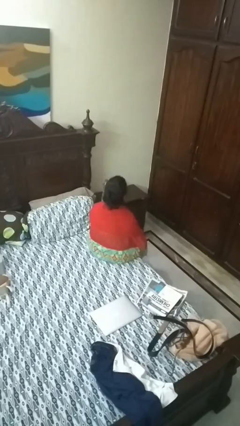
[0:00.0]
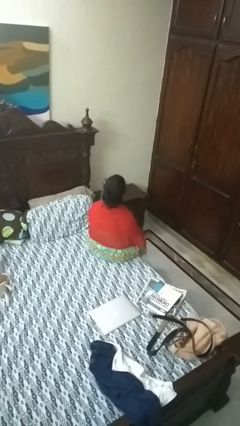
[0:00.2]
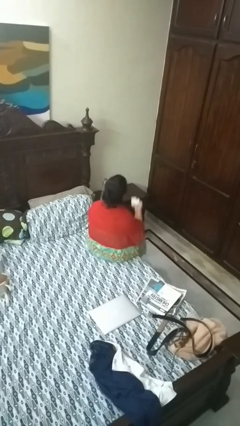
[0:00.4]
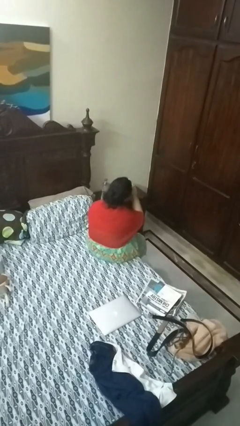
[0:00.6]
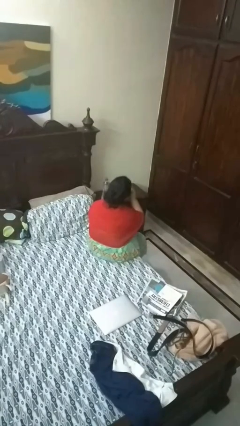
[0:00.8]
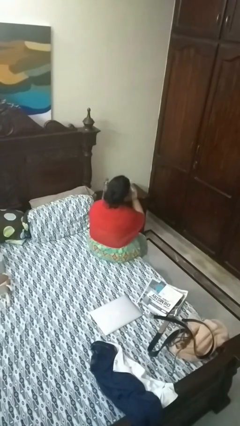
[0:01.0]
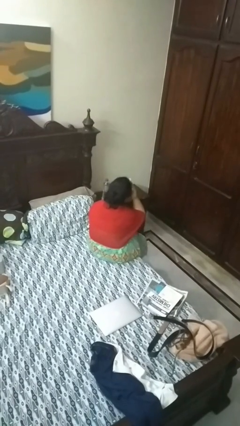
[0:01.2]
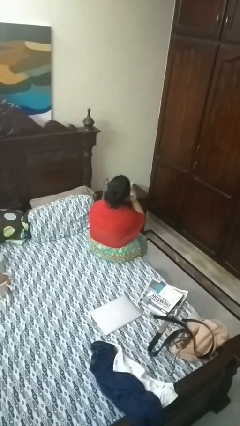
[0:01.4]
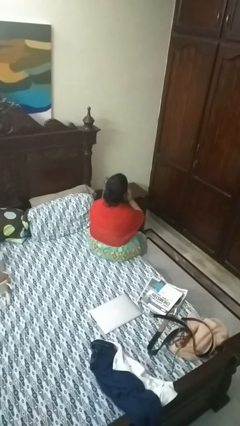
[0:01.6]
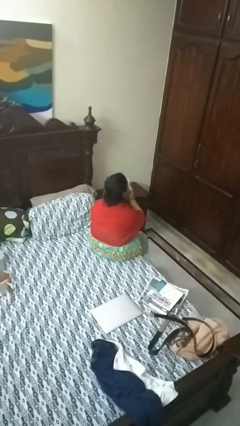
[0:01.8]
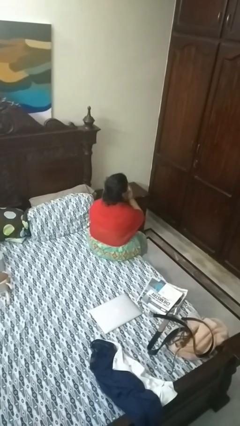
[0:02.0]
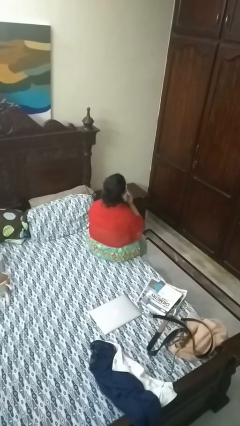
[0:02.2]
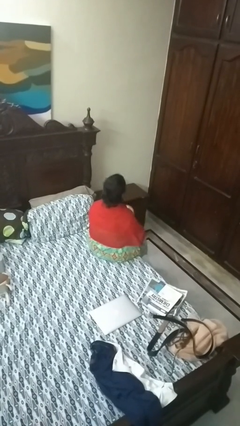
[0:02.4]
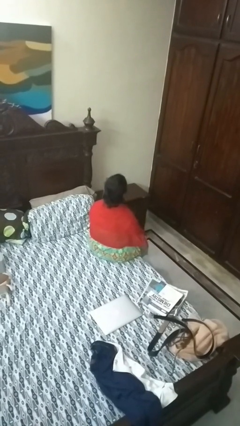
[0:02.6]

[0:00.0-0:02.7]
person wipes mouth with napkin

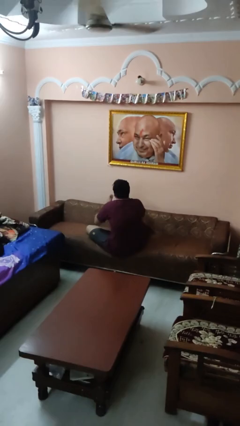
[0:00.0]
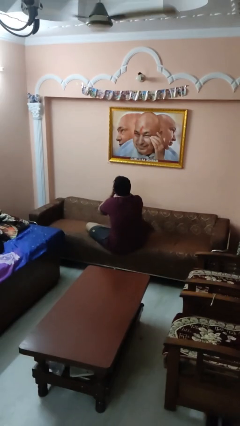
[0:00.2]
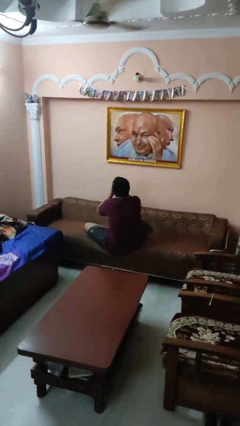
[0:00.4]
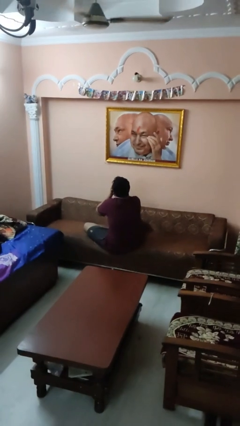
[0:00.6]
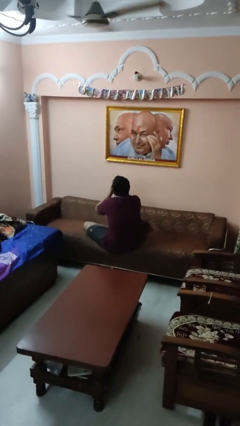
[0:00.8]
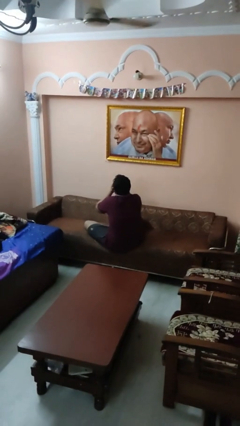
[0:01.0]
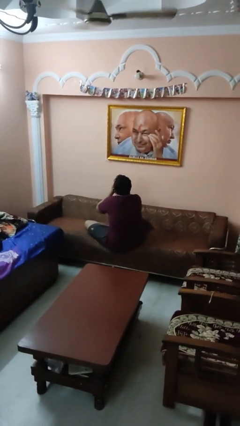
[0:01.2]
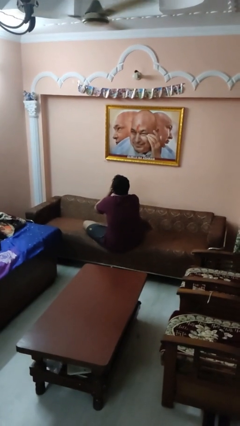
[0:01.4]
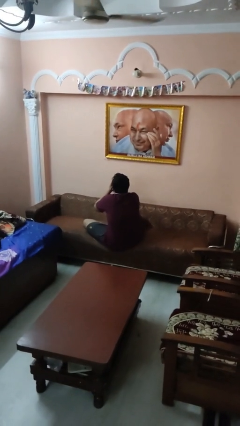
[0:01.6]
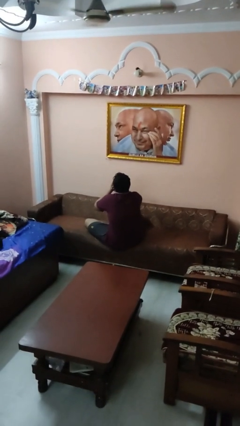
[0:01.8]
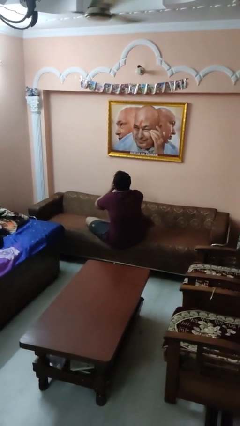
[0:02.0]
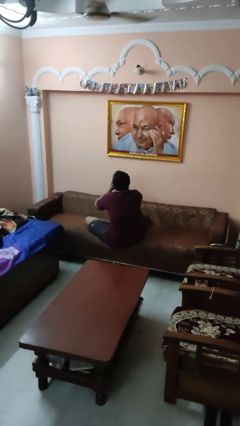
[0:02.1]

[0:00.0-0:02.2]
person covers face with hands

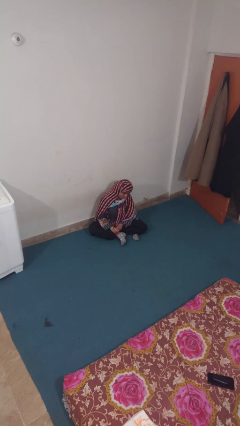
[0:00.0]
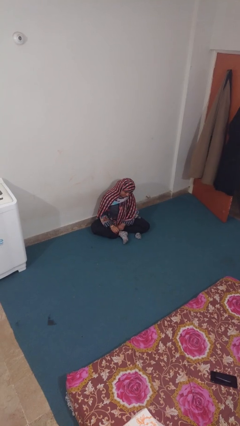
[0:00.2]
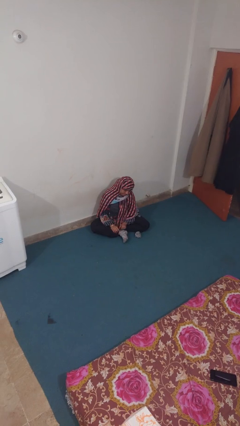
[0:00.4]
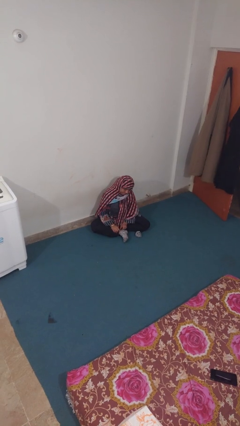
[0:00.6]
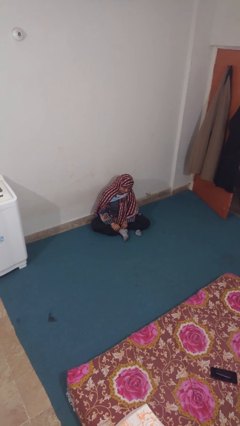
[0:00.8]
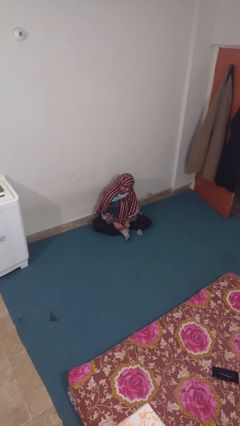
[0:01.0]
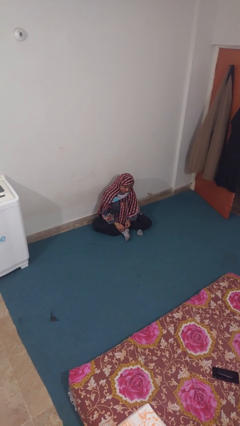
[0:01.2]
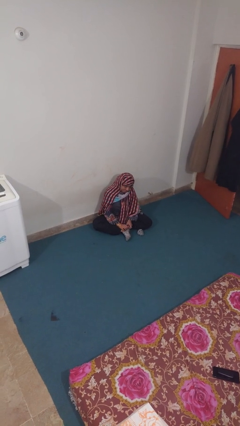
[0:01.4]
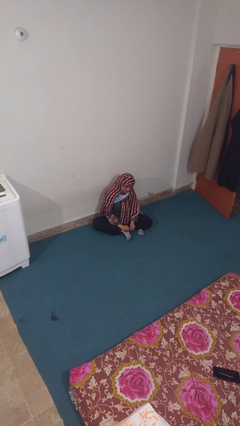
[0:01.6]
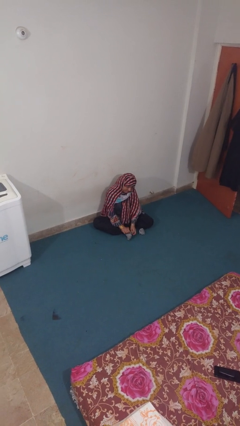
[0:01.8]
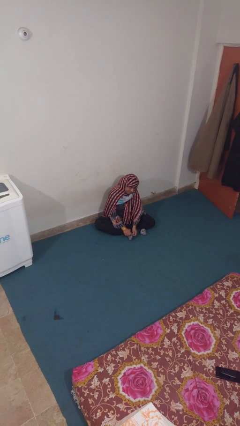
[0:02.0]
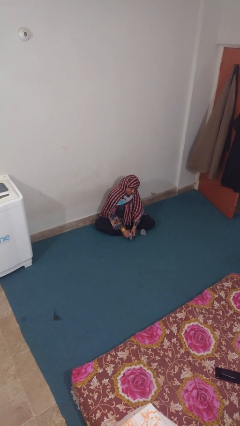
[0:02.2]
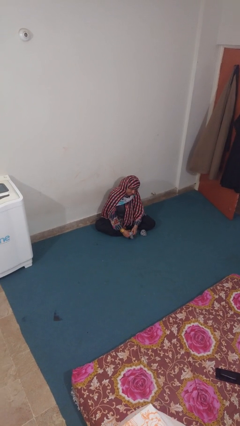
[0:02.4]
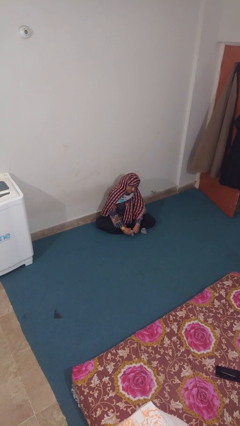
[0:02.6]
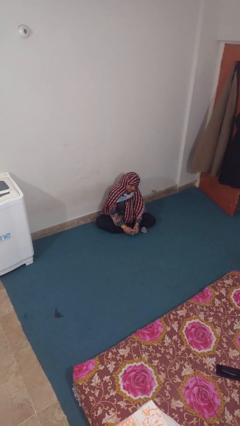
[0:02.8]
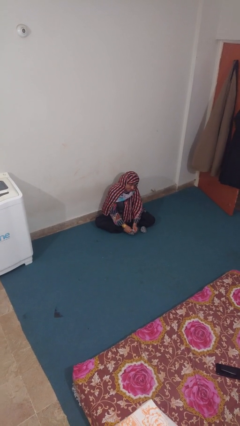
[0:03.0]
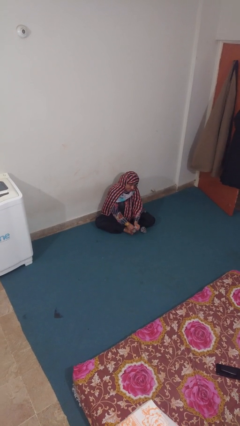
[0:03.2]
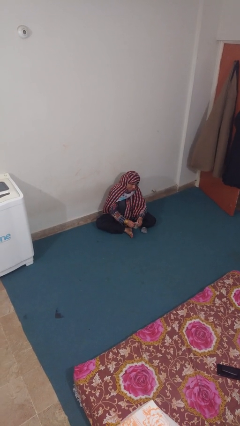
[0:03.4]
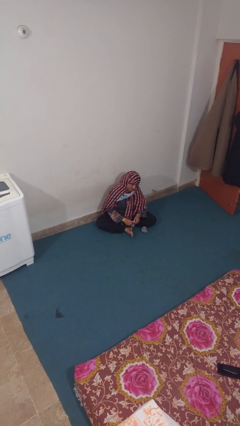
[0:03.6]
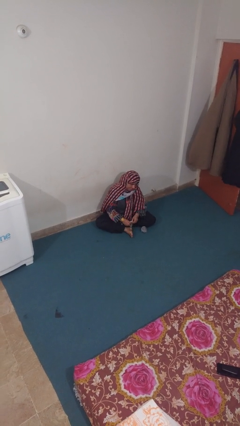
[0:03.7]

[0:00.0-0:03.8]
person takes off socks

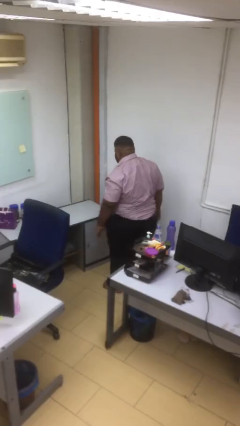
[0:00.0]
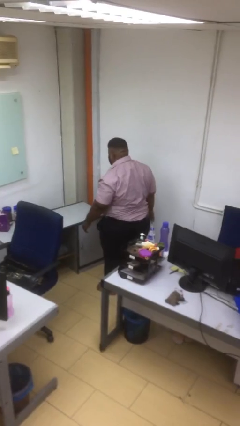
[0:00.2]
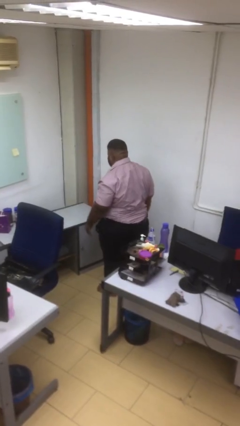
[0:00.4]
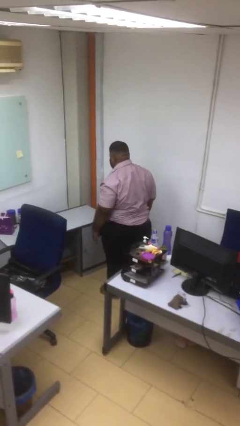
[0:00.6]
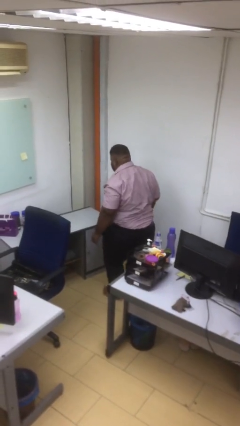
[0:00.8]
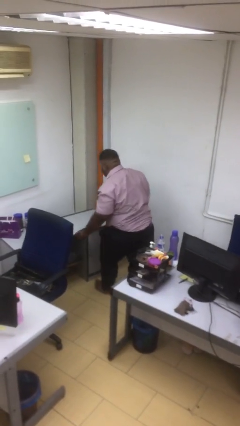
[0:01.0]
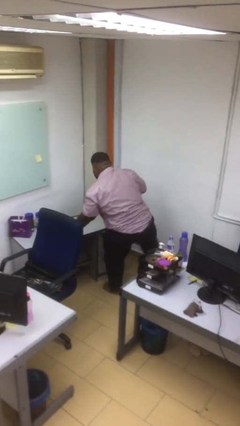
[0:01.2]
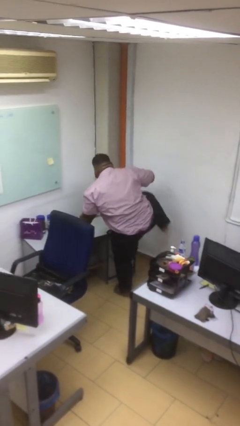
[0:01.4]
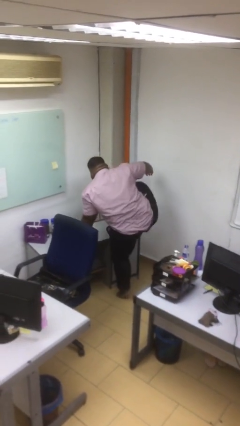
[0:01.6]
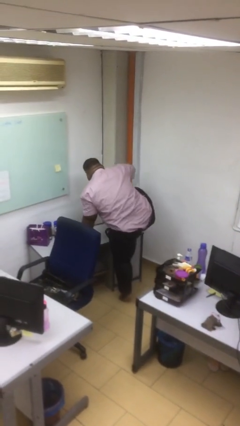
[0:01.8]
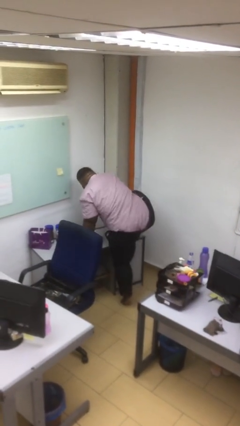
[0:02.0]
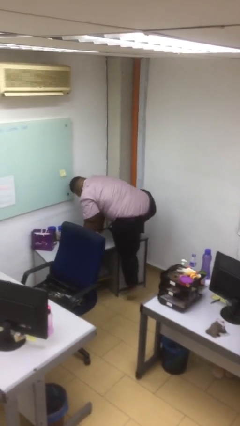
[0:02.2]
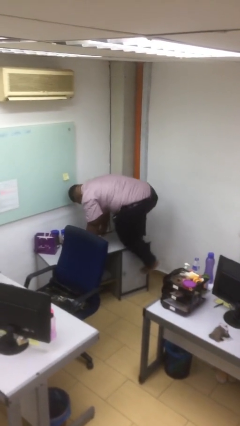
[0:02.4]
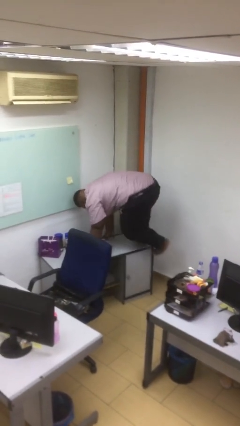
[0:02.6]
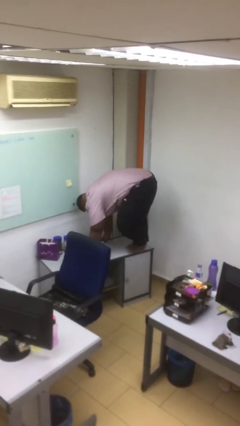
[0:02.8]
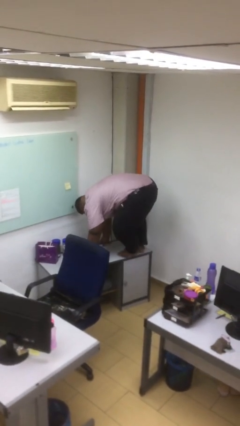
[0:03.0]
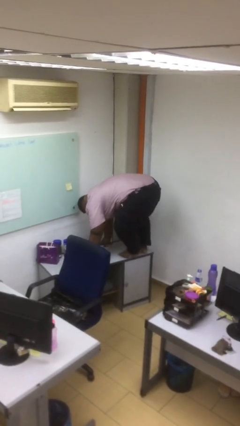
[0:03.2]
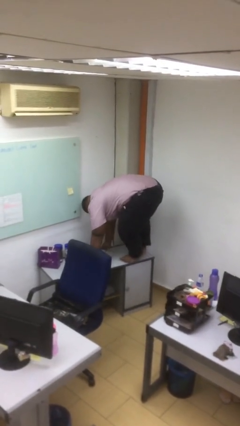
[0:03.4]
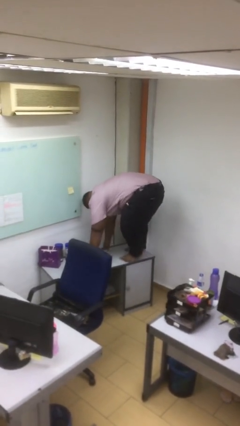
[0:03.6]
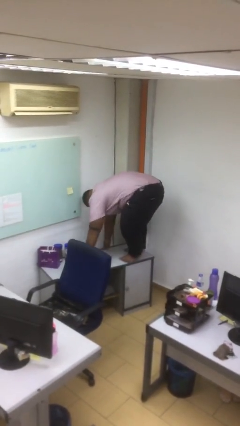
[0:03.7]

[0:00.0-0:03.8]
person climbs on table

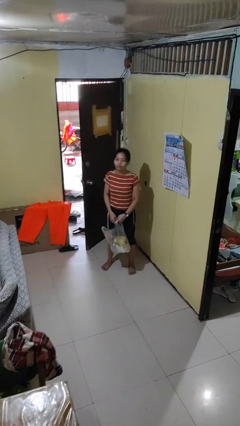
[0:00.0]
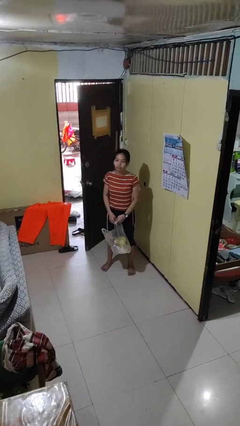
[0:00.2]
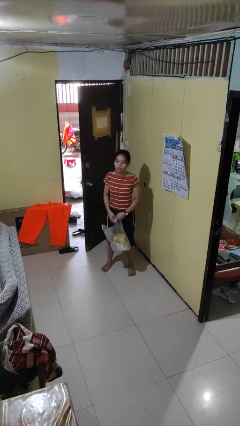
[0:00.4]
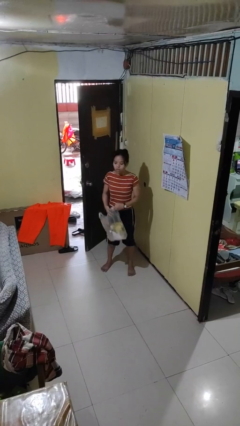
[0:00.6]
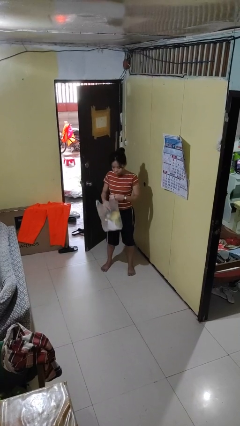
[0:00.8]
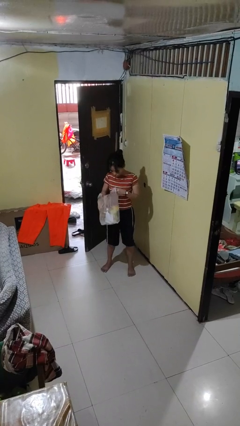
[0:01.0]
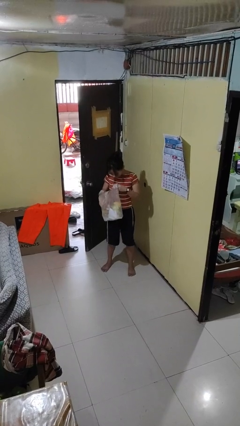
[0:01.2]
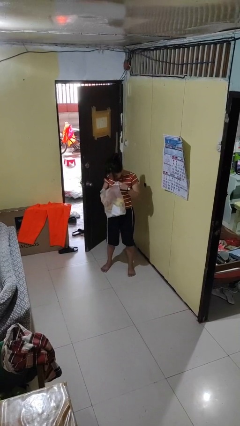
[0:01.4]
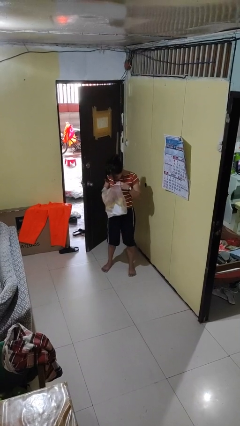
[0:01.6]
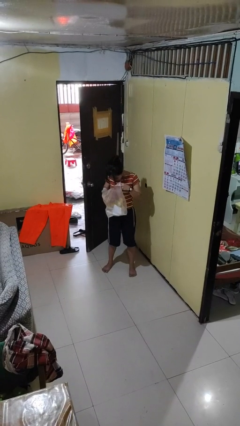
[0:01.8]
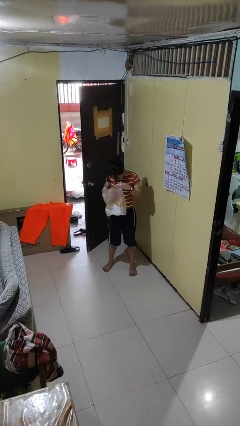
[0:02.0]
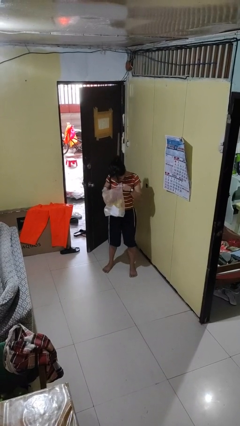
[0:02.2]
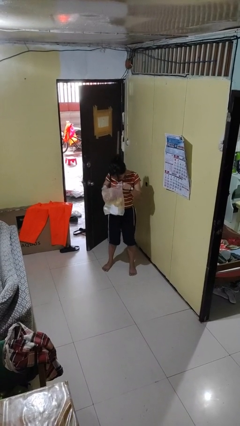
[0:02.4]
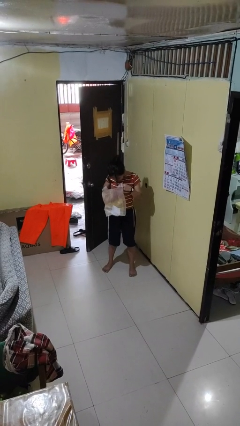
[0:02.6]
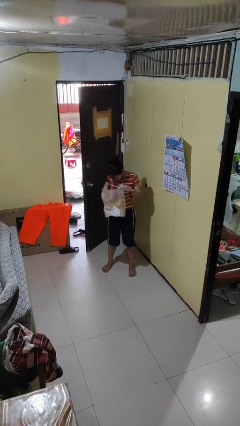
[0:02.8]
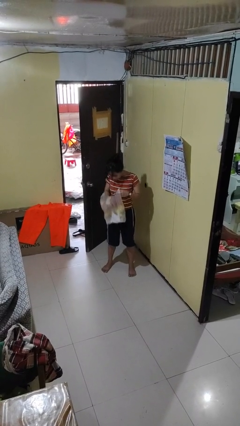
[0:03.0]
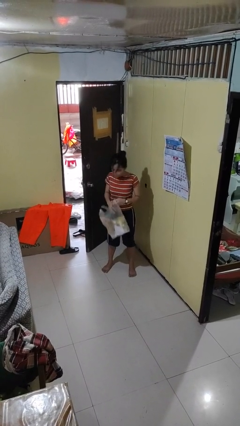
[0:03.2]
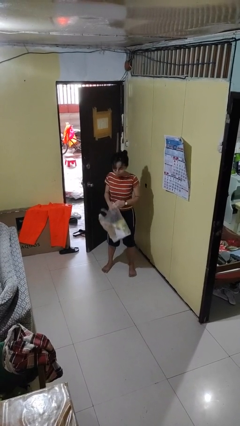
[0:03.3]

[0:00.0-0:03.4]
person searches in bag

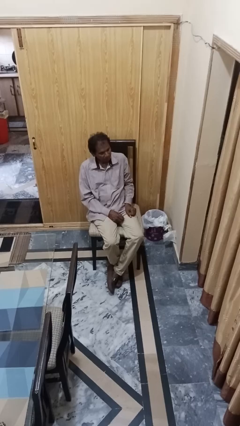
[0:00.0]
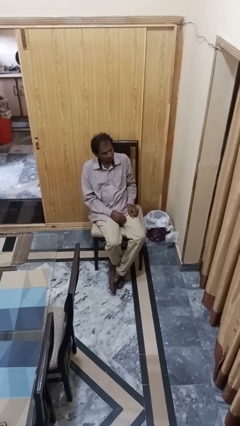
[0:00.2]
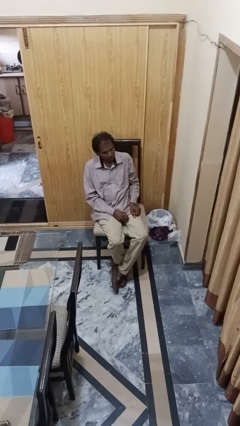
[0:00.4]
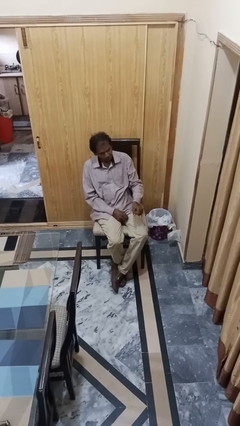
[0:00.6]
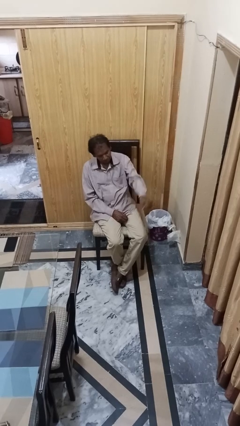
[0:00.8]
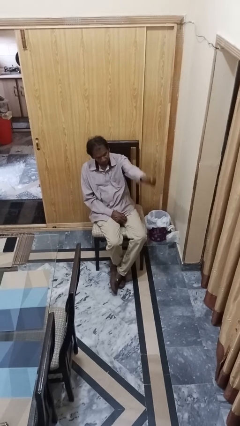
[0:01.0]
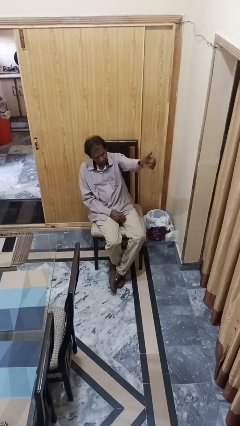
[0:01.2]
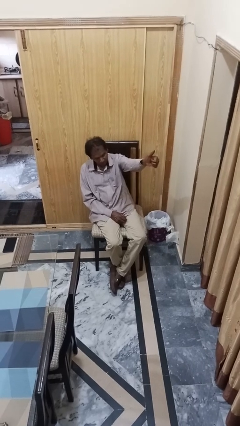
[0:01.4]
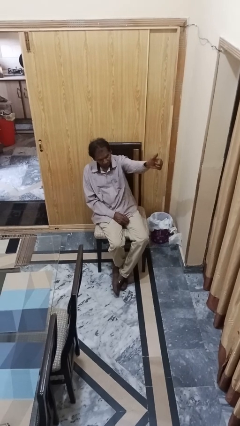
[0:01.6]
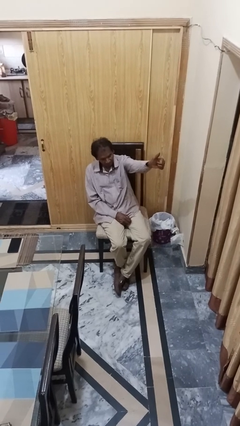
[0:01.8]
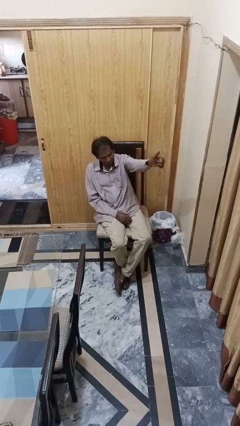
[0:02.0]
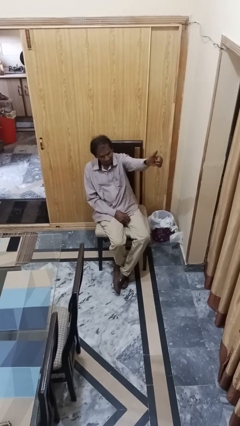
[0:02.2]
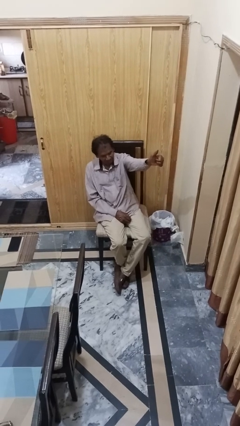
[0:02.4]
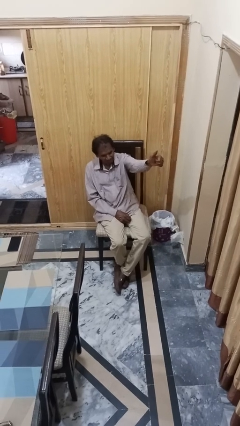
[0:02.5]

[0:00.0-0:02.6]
person gestures thumbs up
